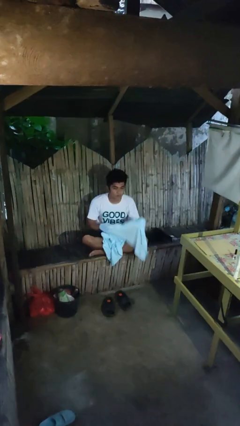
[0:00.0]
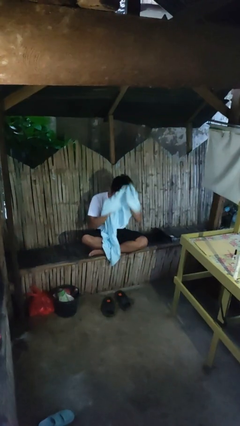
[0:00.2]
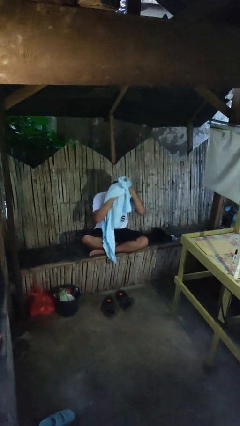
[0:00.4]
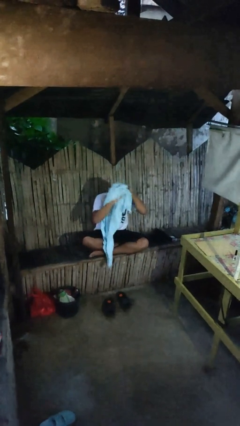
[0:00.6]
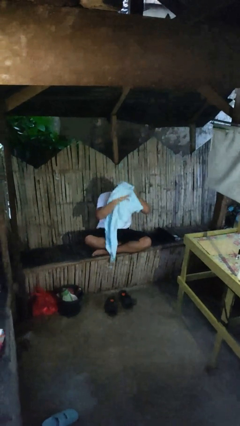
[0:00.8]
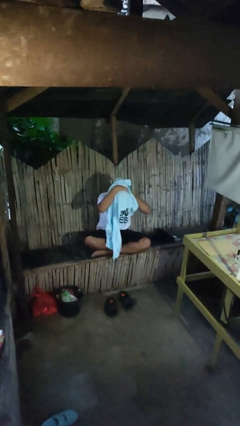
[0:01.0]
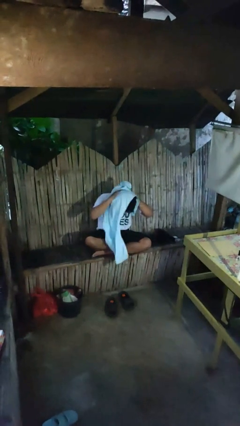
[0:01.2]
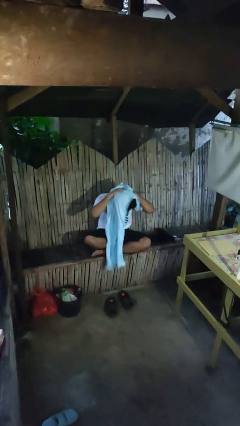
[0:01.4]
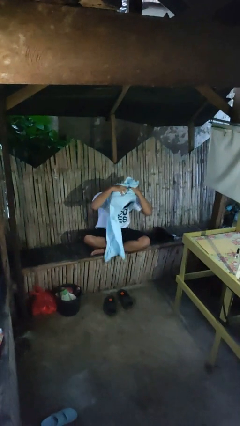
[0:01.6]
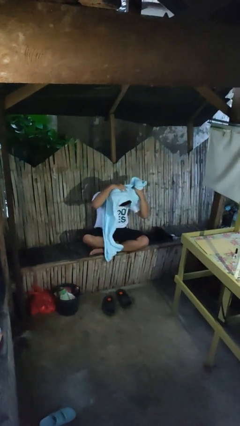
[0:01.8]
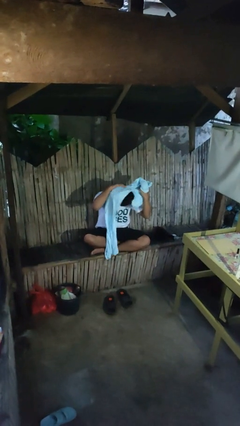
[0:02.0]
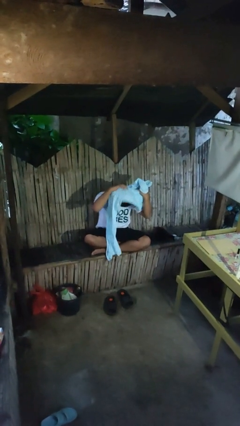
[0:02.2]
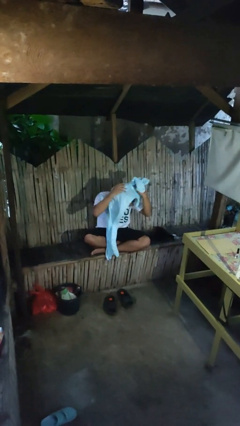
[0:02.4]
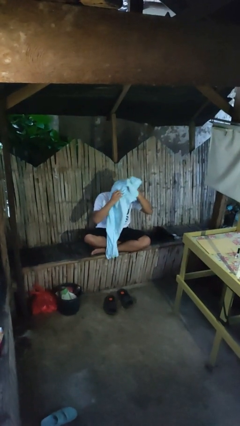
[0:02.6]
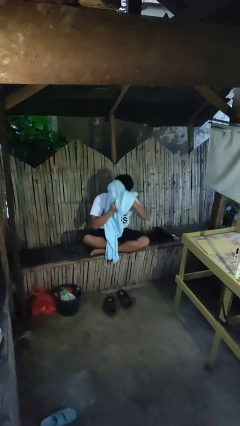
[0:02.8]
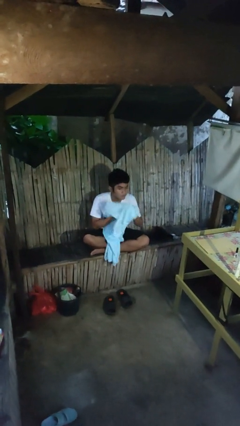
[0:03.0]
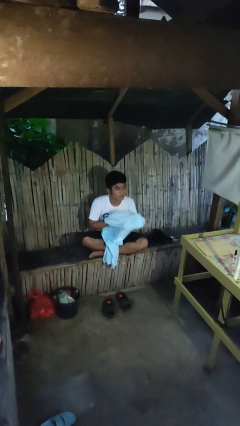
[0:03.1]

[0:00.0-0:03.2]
person dries hair with towel

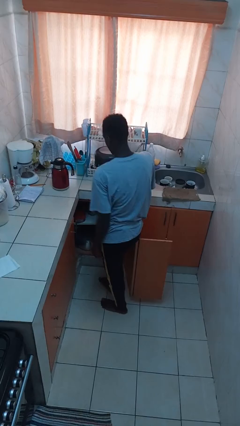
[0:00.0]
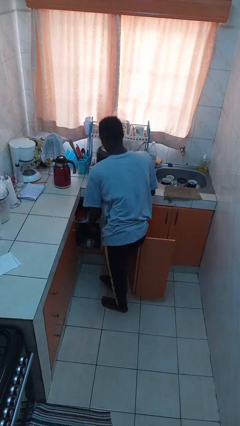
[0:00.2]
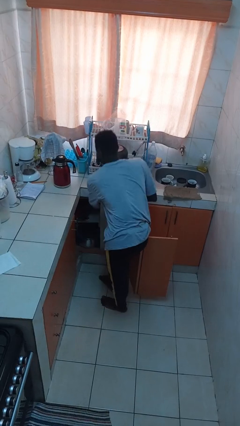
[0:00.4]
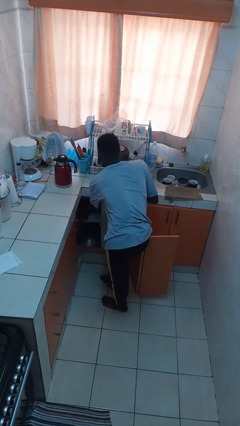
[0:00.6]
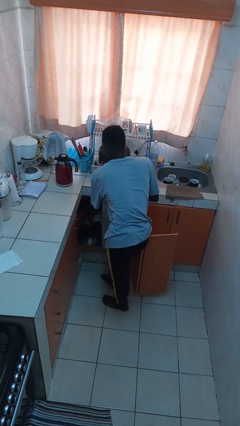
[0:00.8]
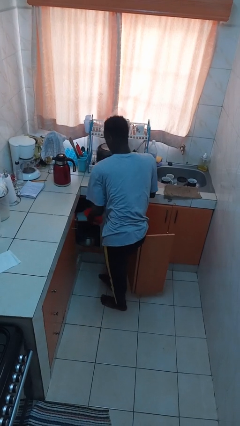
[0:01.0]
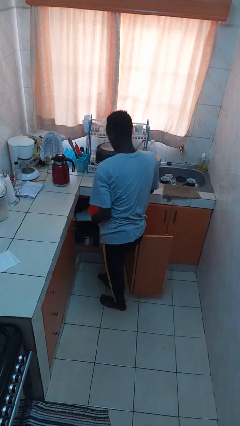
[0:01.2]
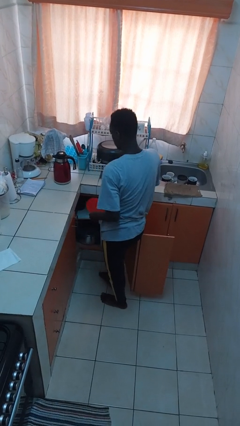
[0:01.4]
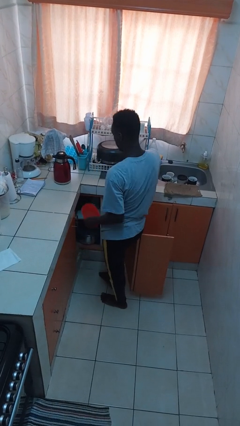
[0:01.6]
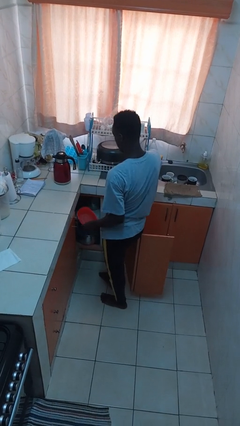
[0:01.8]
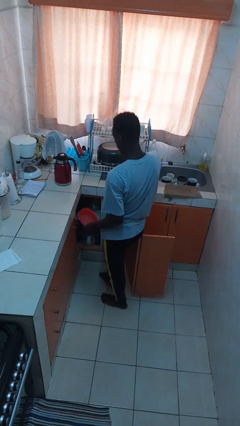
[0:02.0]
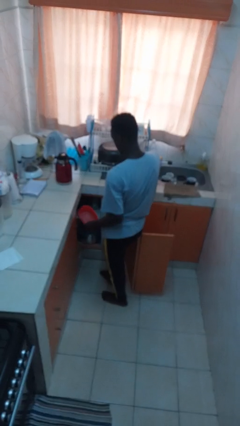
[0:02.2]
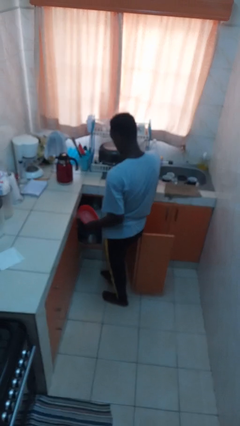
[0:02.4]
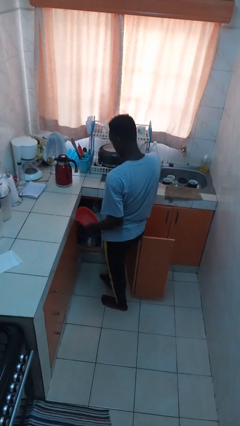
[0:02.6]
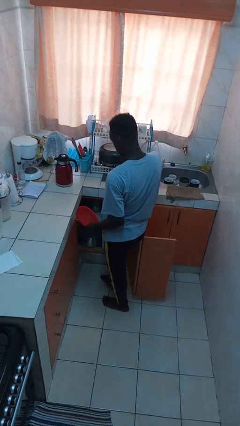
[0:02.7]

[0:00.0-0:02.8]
person takes object from cabinet

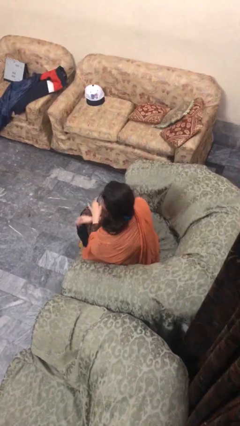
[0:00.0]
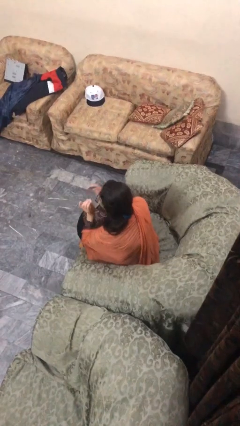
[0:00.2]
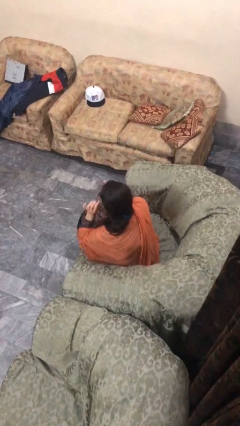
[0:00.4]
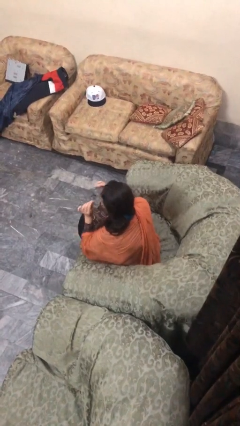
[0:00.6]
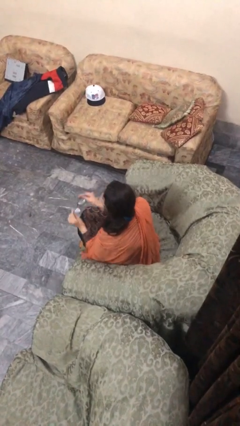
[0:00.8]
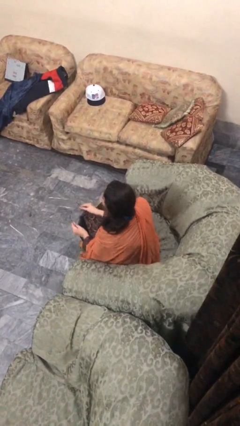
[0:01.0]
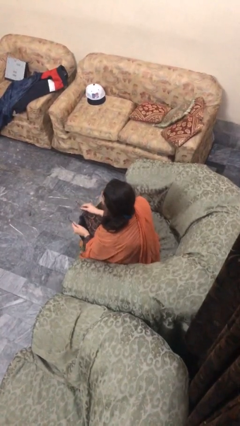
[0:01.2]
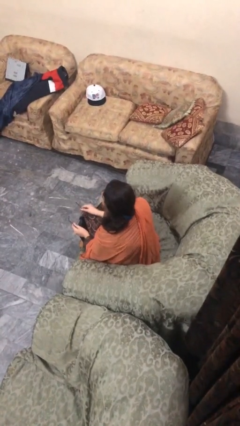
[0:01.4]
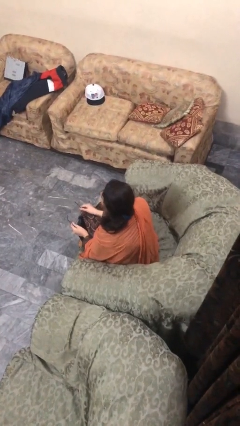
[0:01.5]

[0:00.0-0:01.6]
person takes off glasses

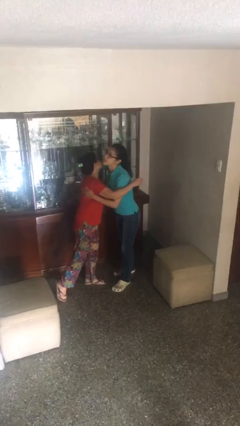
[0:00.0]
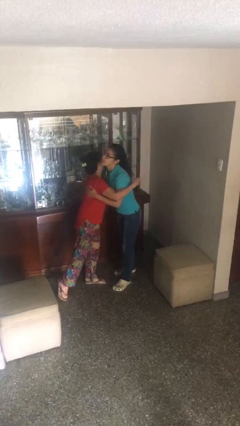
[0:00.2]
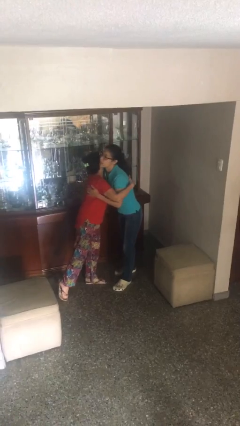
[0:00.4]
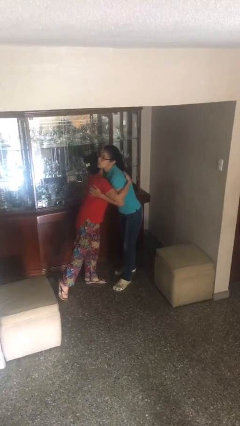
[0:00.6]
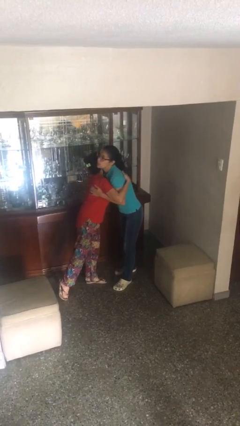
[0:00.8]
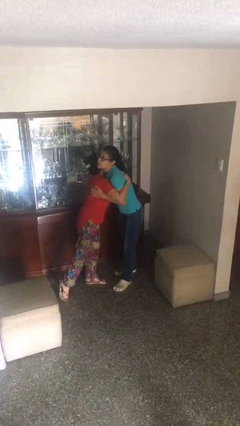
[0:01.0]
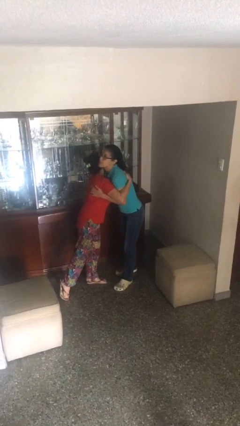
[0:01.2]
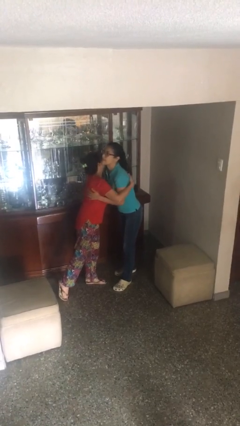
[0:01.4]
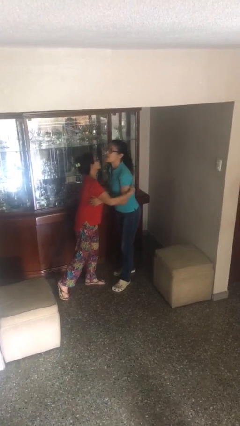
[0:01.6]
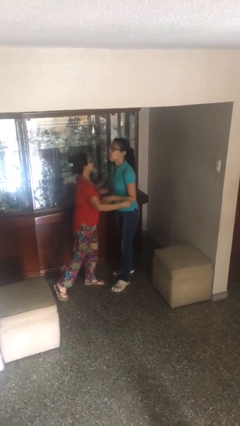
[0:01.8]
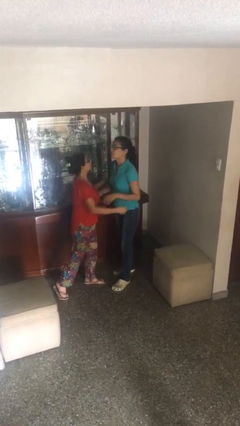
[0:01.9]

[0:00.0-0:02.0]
person embraces person

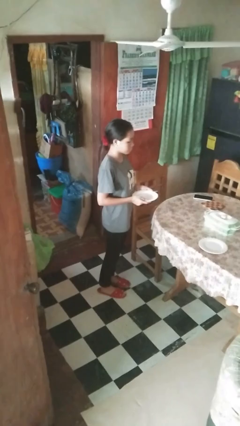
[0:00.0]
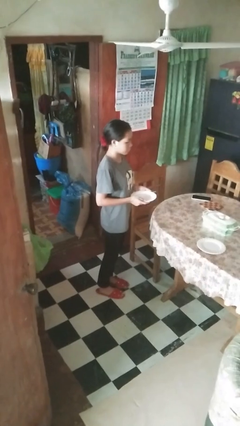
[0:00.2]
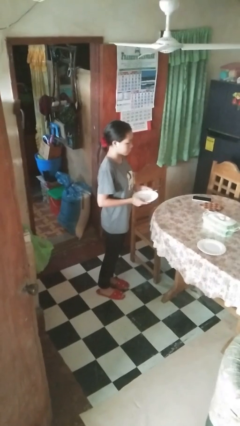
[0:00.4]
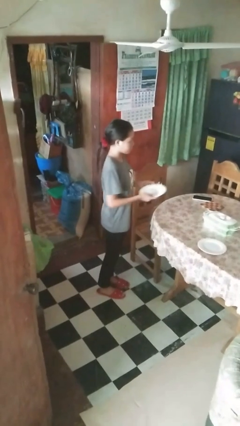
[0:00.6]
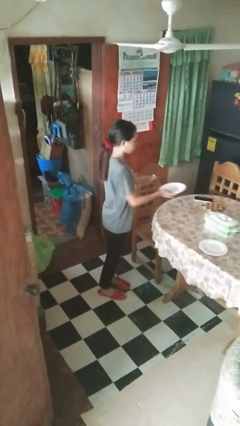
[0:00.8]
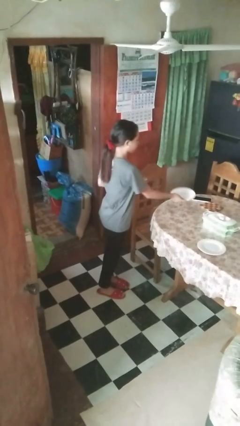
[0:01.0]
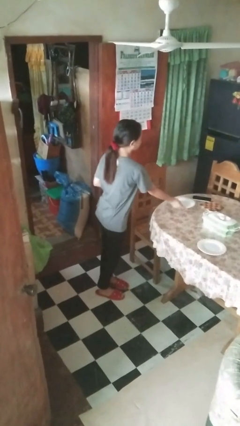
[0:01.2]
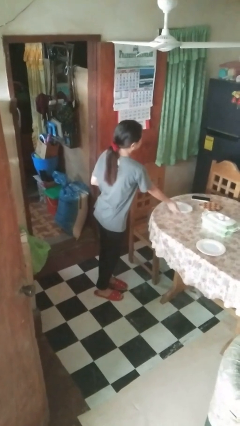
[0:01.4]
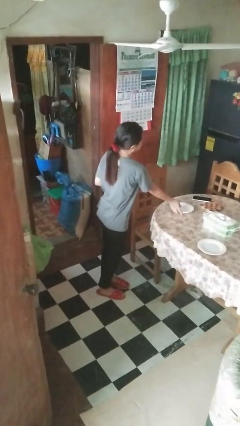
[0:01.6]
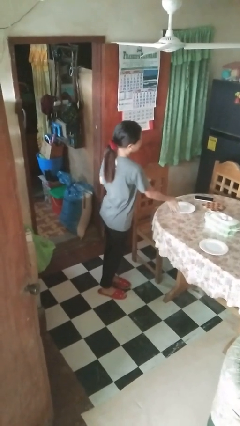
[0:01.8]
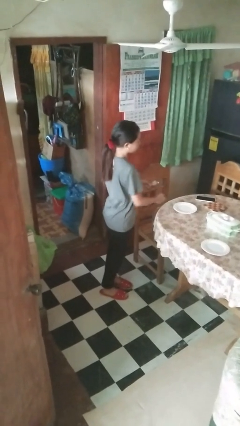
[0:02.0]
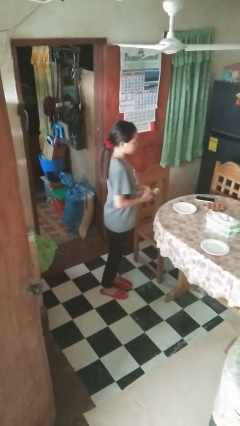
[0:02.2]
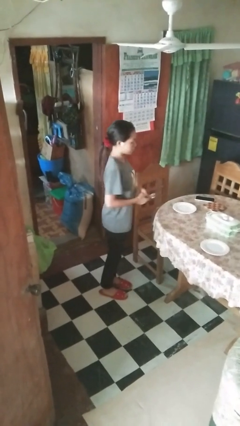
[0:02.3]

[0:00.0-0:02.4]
person sets table

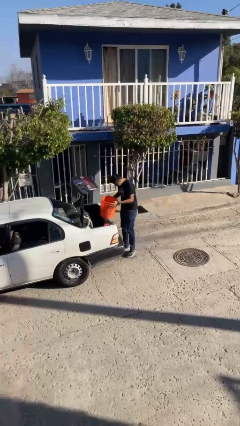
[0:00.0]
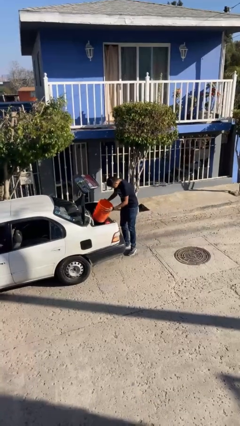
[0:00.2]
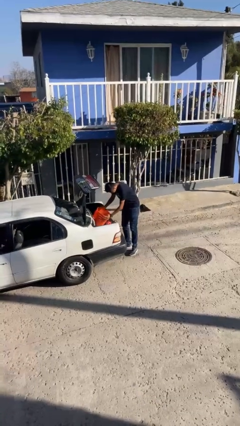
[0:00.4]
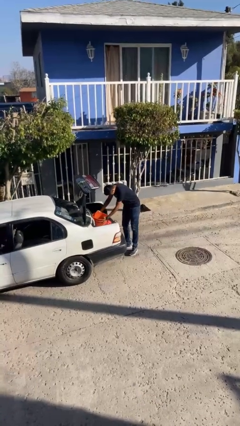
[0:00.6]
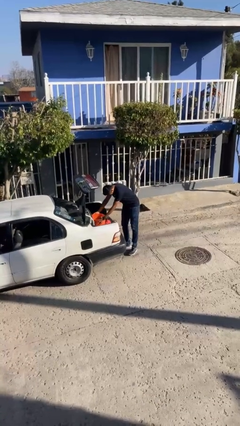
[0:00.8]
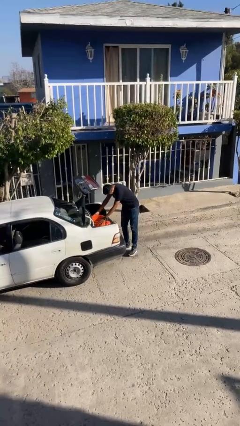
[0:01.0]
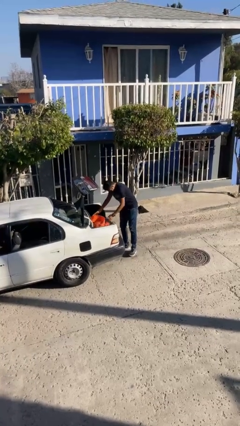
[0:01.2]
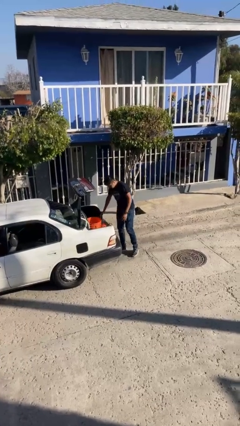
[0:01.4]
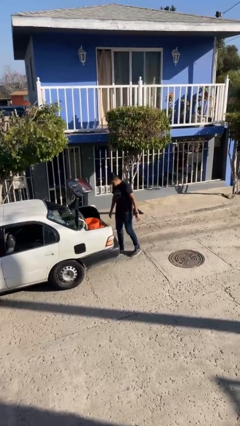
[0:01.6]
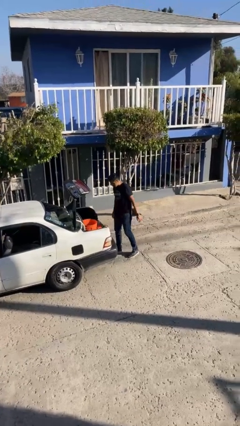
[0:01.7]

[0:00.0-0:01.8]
person loads car

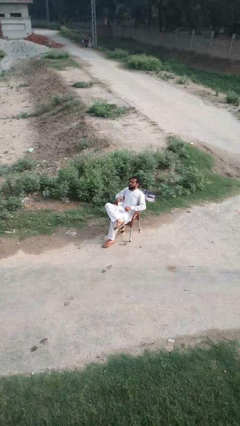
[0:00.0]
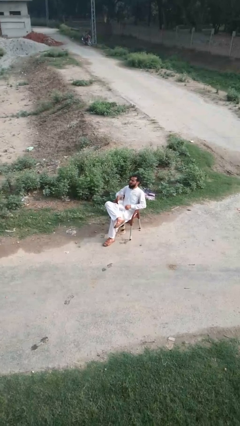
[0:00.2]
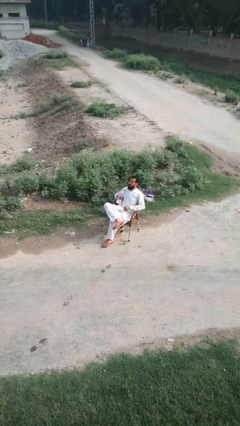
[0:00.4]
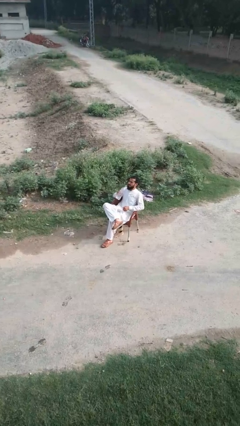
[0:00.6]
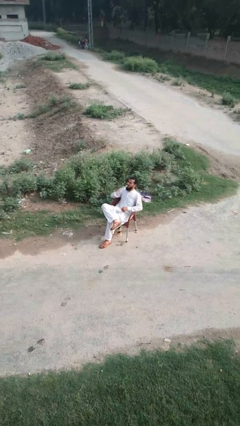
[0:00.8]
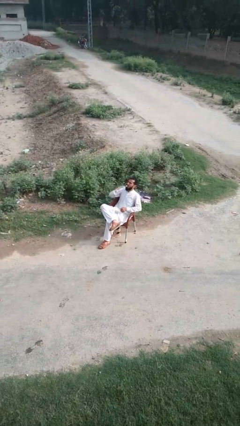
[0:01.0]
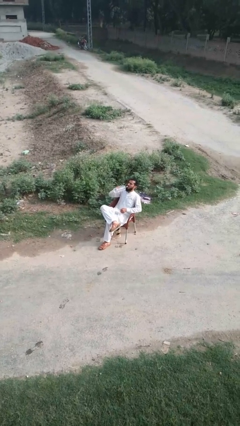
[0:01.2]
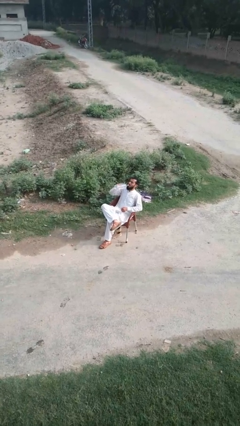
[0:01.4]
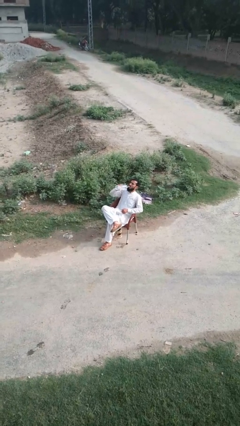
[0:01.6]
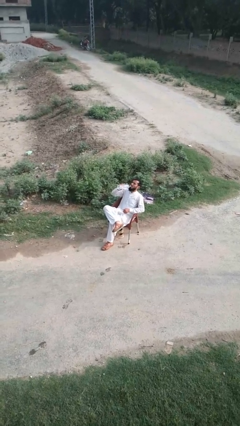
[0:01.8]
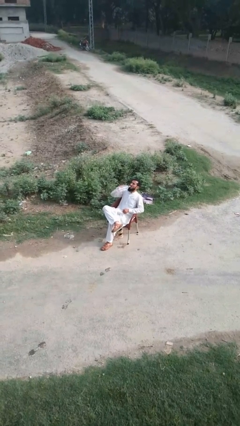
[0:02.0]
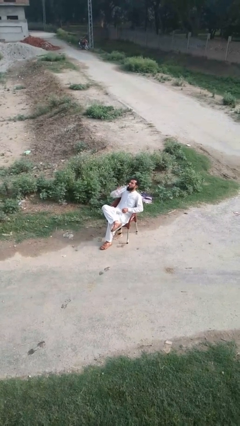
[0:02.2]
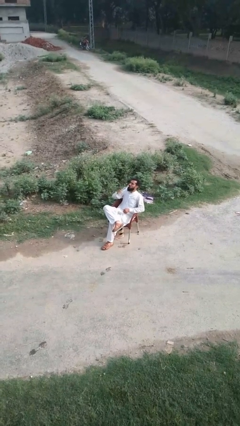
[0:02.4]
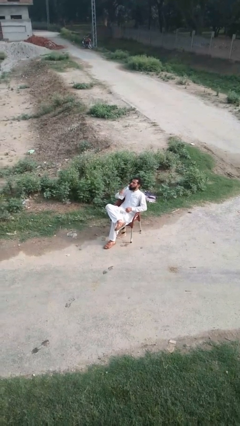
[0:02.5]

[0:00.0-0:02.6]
person drinks from bottle
